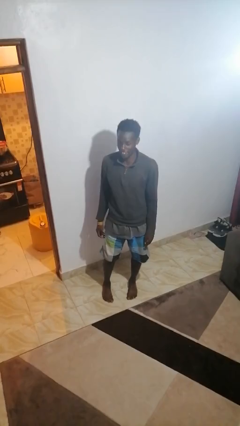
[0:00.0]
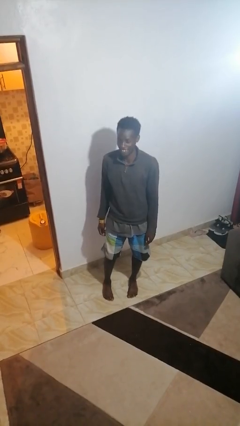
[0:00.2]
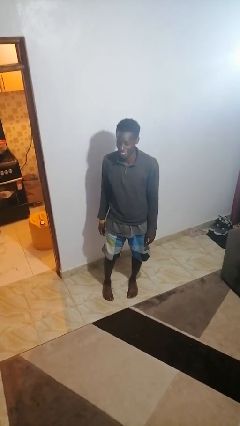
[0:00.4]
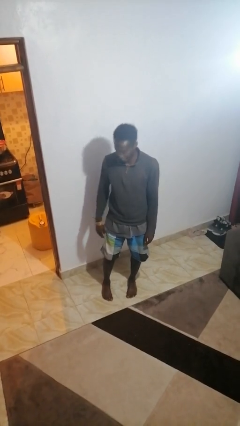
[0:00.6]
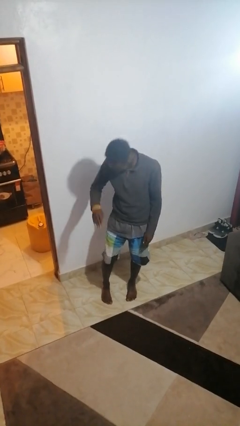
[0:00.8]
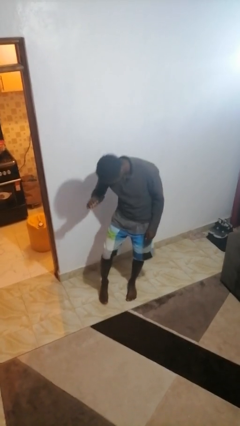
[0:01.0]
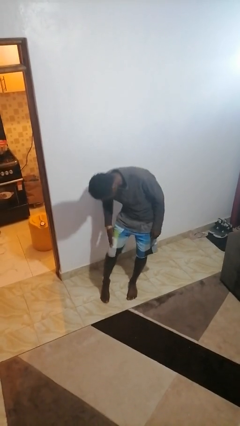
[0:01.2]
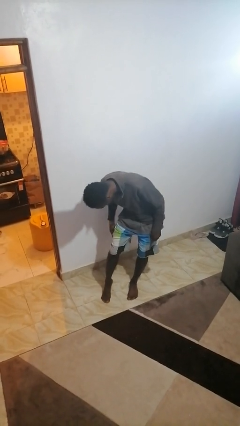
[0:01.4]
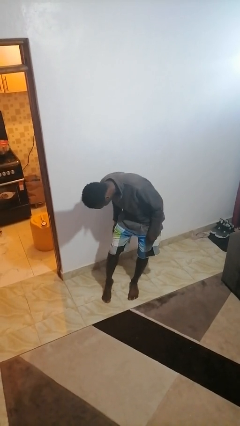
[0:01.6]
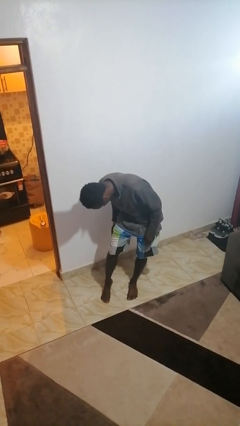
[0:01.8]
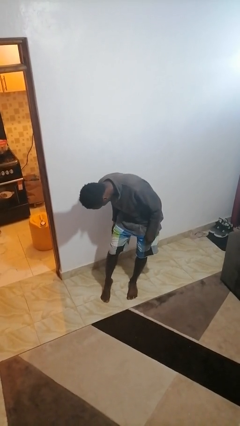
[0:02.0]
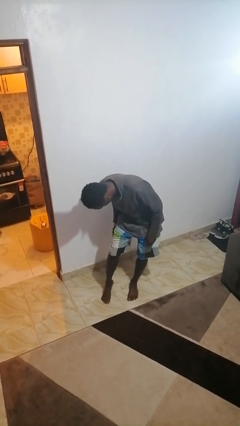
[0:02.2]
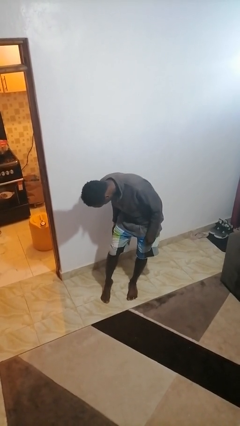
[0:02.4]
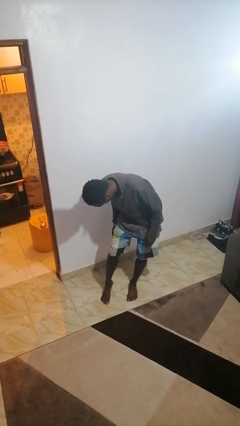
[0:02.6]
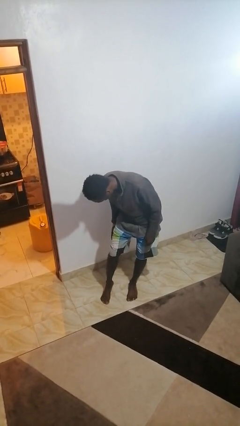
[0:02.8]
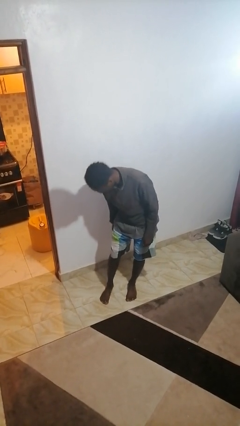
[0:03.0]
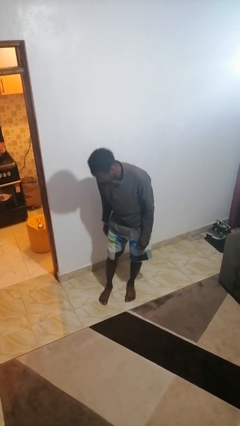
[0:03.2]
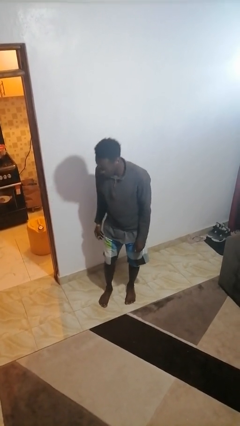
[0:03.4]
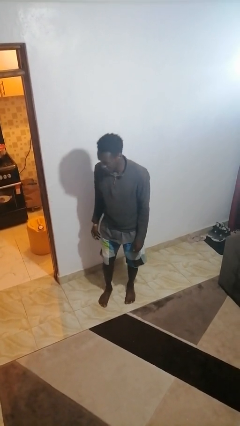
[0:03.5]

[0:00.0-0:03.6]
person swats bug

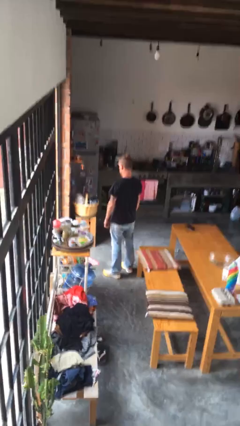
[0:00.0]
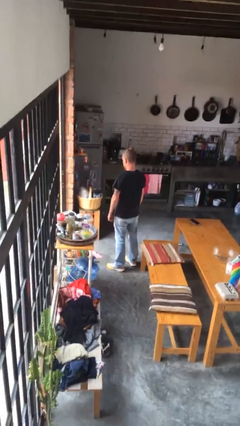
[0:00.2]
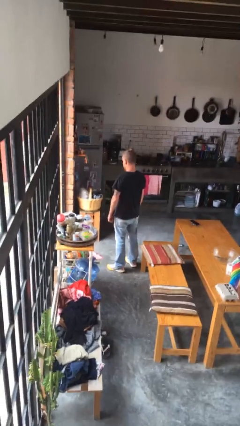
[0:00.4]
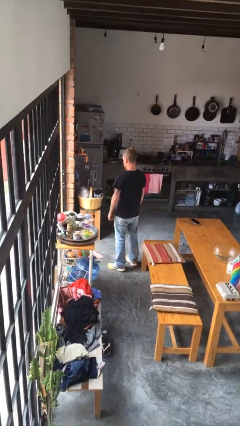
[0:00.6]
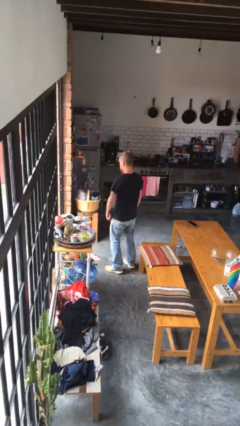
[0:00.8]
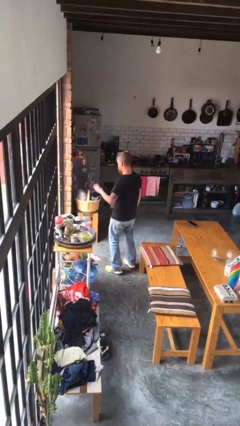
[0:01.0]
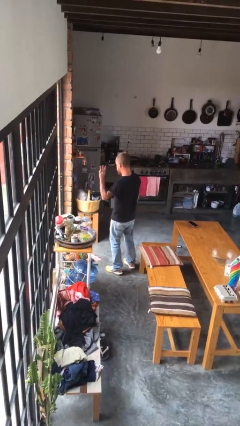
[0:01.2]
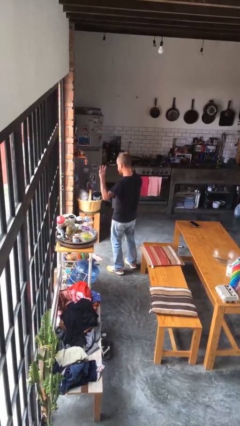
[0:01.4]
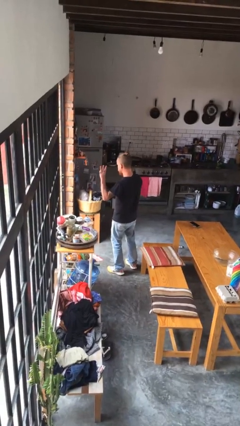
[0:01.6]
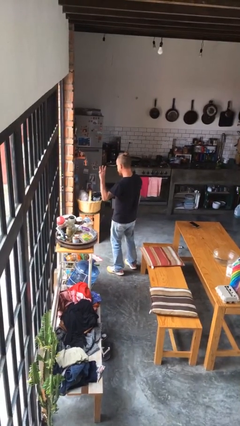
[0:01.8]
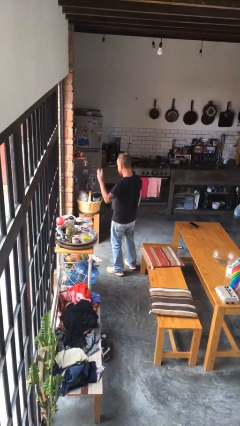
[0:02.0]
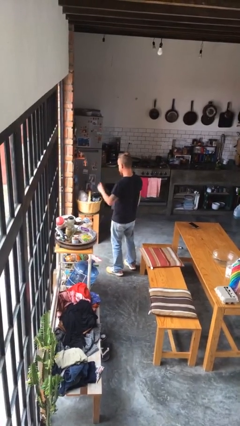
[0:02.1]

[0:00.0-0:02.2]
person gestures number three

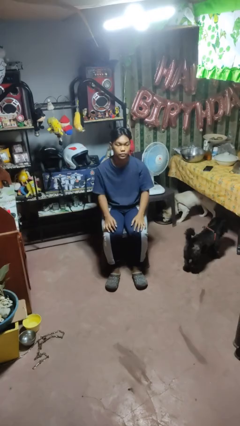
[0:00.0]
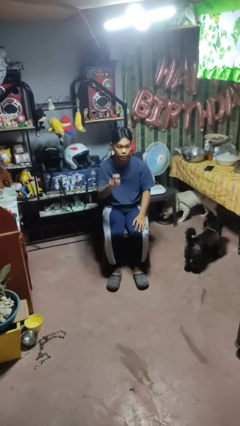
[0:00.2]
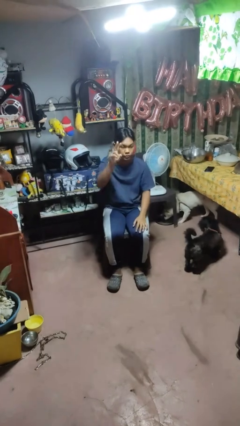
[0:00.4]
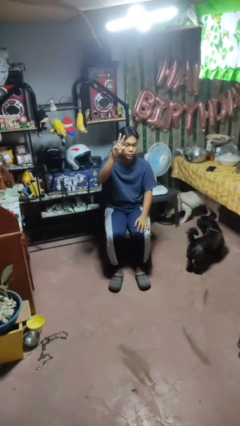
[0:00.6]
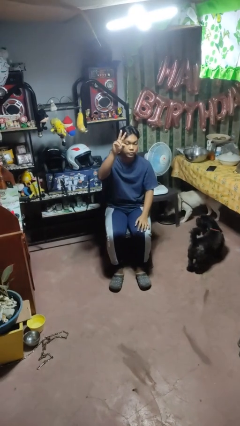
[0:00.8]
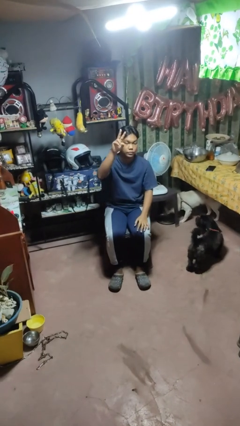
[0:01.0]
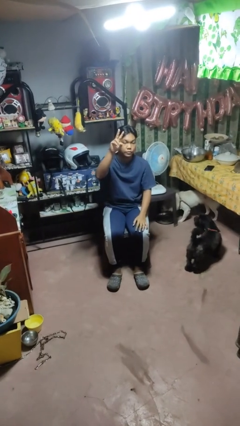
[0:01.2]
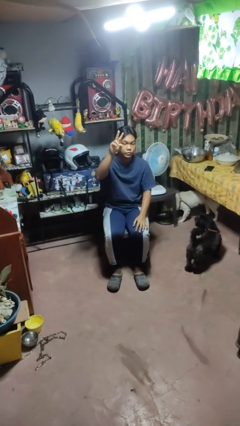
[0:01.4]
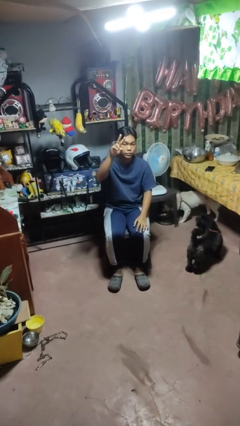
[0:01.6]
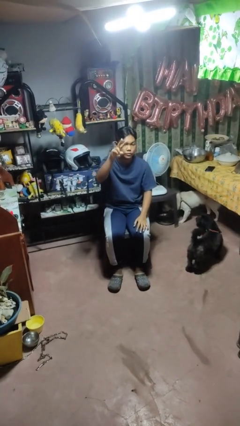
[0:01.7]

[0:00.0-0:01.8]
person gestures peace

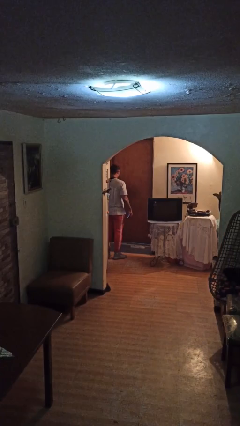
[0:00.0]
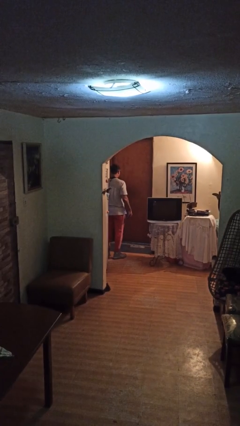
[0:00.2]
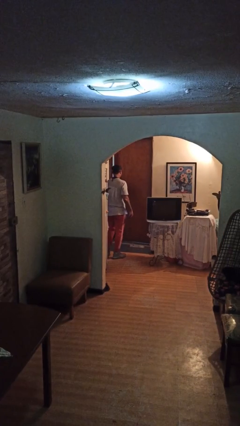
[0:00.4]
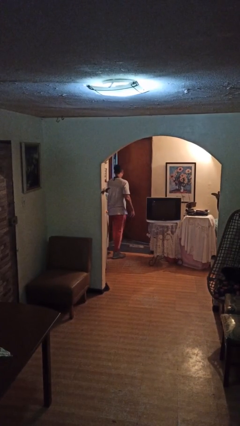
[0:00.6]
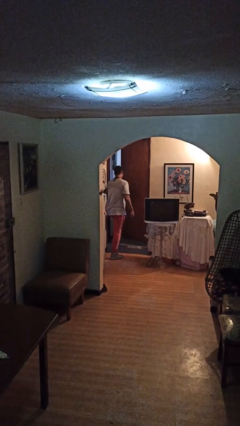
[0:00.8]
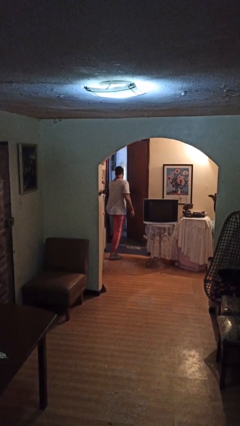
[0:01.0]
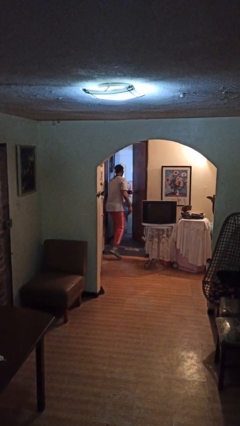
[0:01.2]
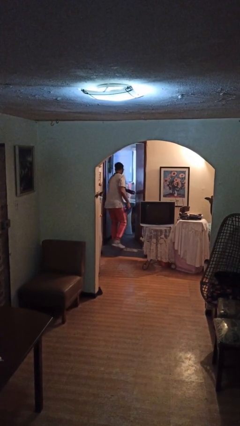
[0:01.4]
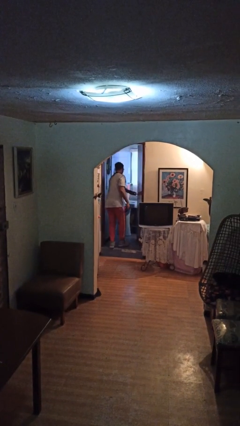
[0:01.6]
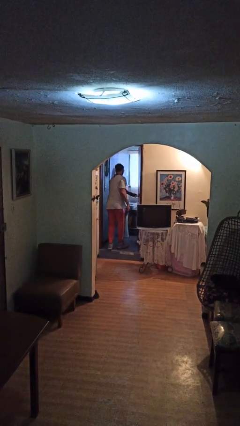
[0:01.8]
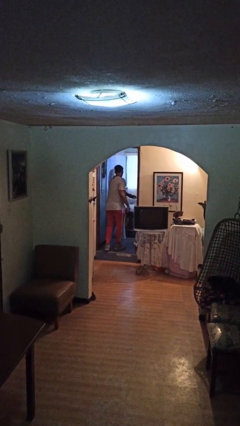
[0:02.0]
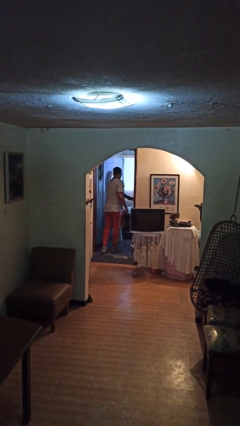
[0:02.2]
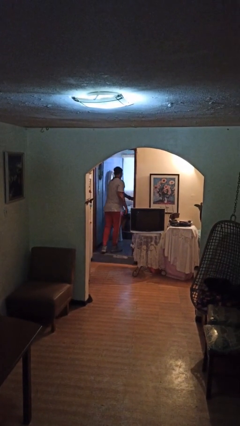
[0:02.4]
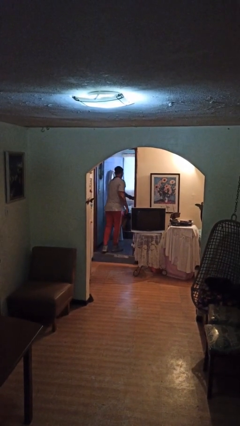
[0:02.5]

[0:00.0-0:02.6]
person opens facility door

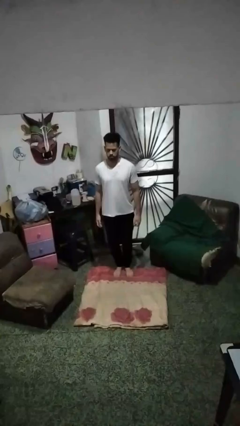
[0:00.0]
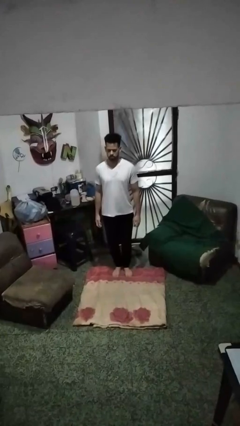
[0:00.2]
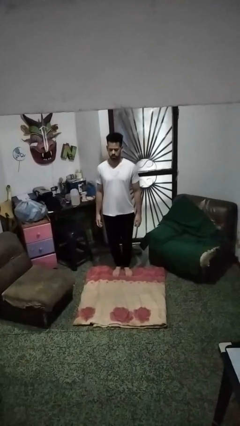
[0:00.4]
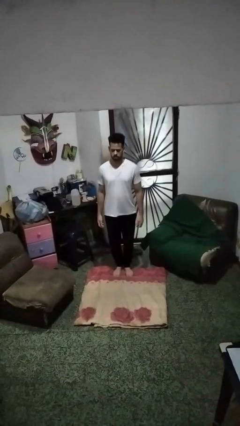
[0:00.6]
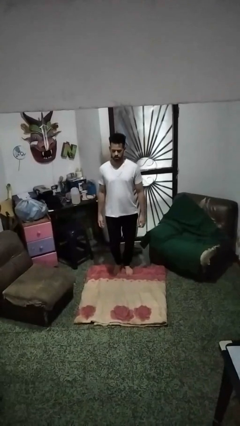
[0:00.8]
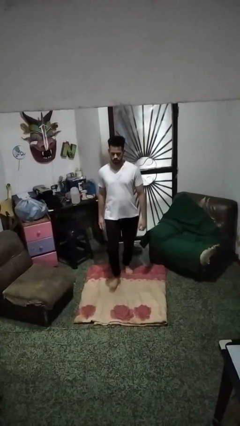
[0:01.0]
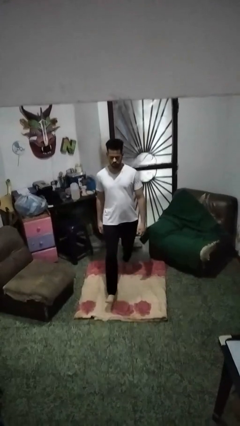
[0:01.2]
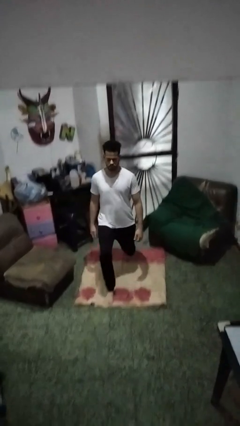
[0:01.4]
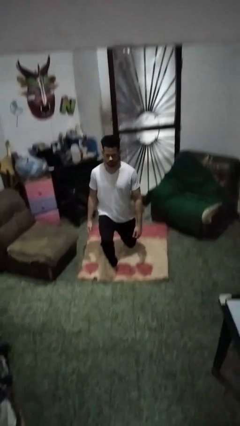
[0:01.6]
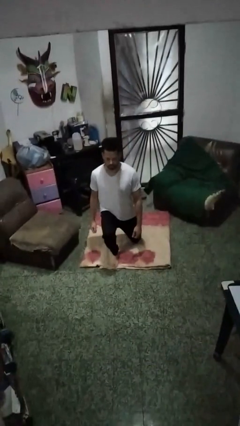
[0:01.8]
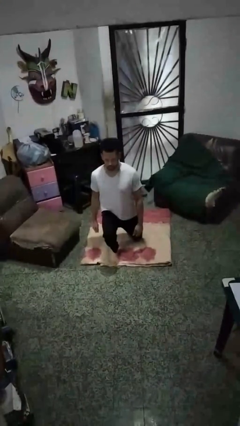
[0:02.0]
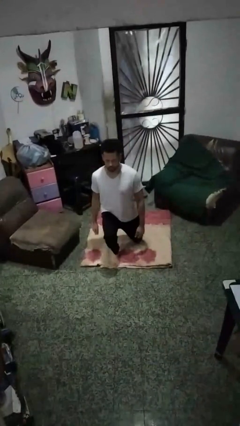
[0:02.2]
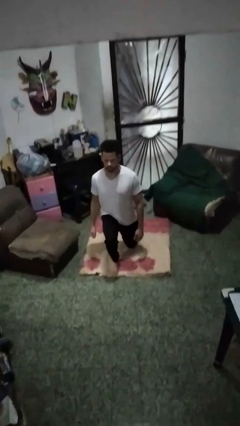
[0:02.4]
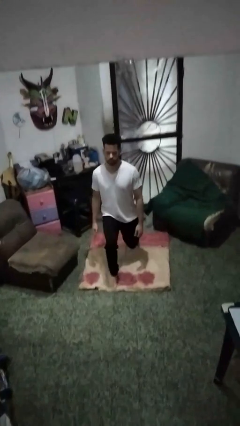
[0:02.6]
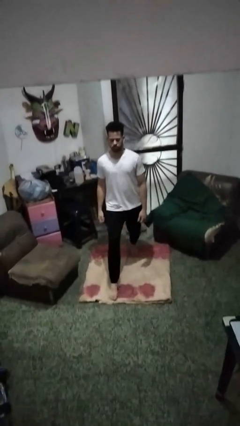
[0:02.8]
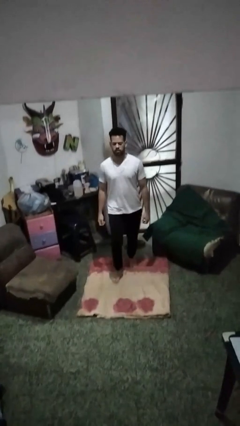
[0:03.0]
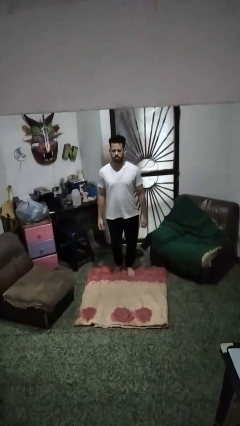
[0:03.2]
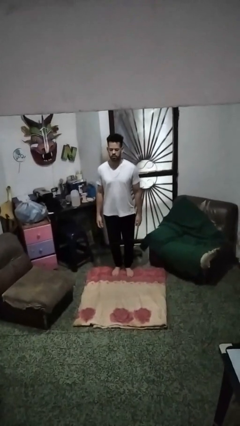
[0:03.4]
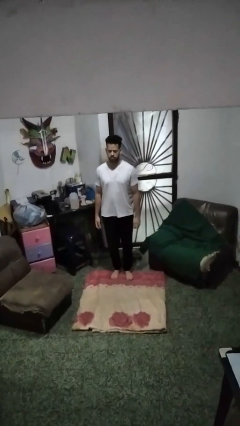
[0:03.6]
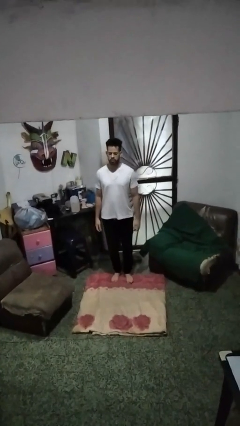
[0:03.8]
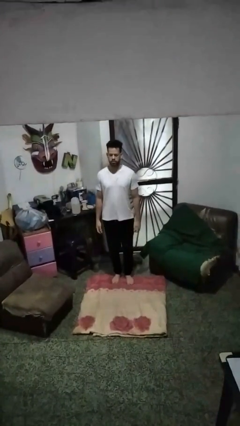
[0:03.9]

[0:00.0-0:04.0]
person exercises with lunges

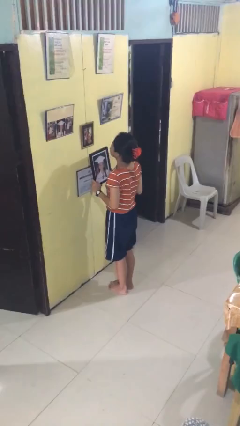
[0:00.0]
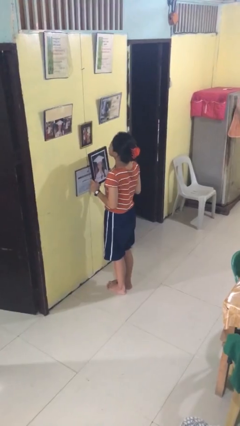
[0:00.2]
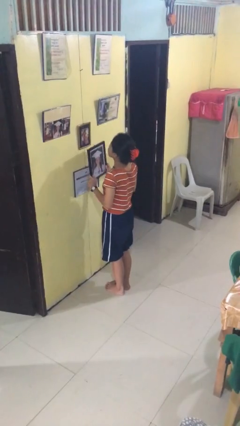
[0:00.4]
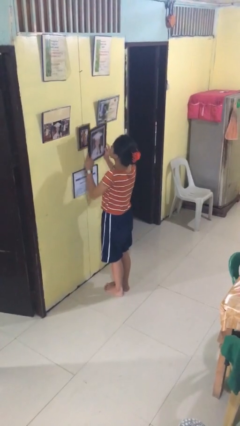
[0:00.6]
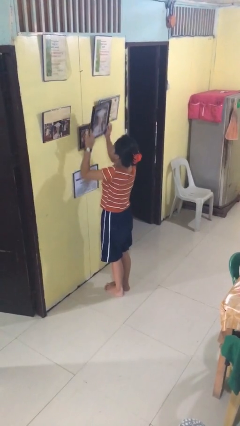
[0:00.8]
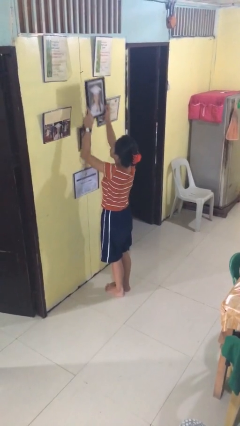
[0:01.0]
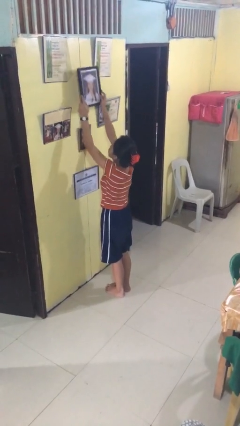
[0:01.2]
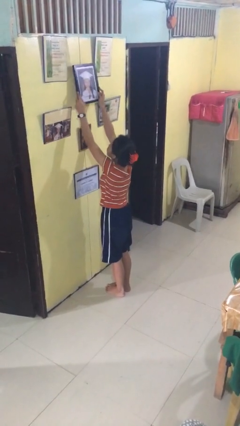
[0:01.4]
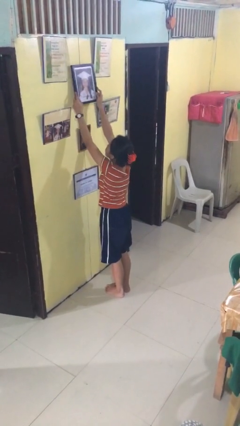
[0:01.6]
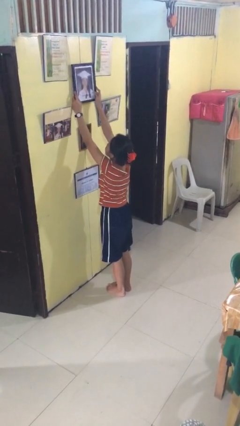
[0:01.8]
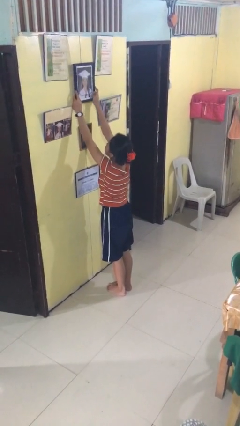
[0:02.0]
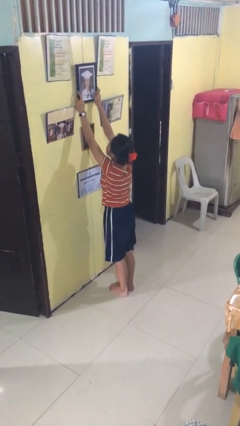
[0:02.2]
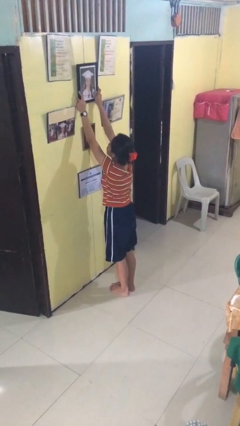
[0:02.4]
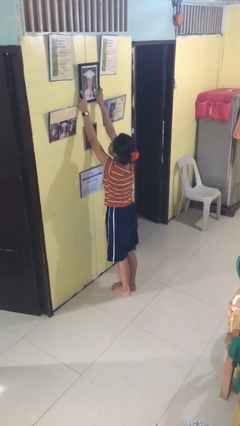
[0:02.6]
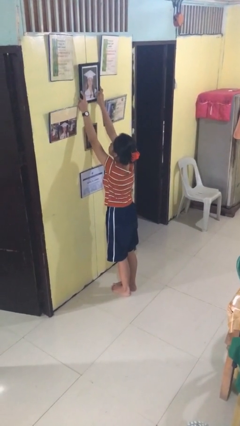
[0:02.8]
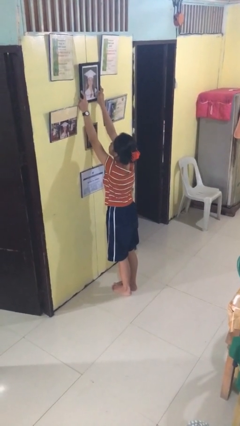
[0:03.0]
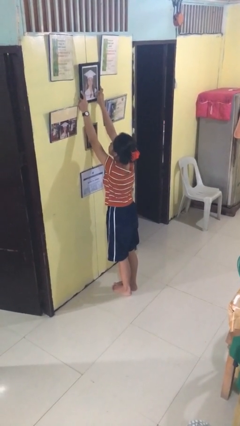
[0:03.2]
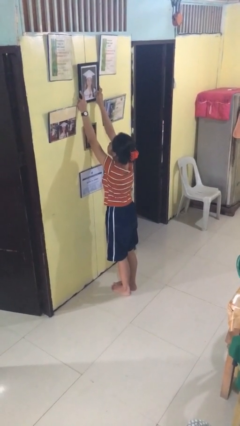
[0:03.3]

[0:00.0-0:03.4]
person puts up picture frame
